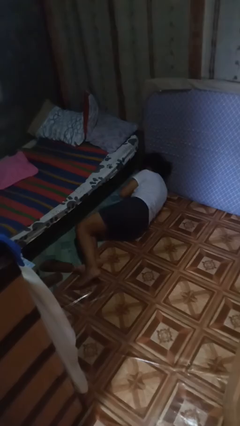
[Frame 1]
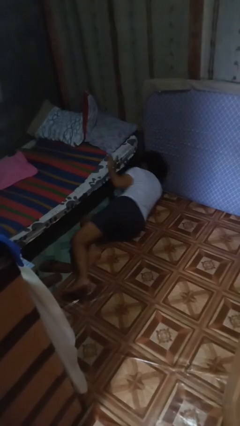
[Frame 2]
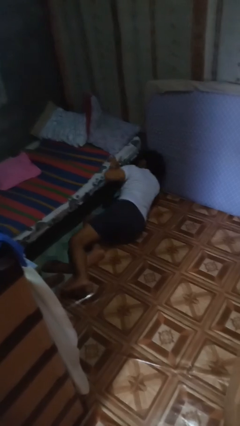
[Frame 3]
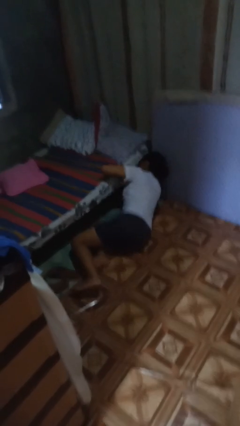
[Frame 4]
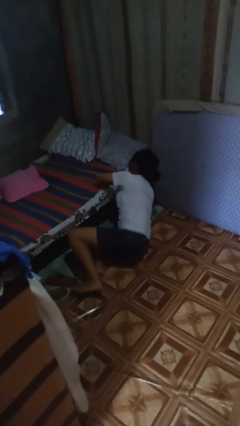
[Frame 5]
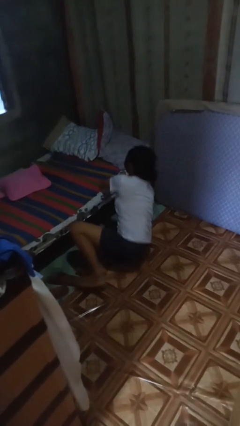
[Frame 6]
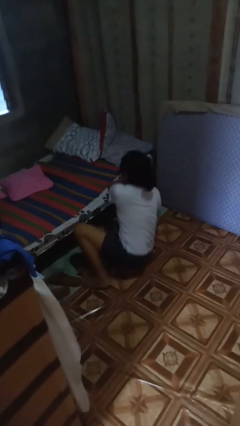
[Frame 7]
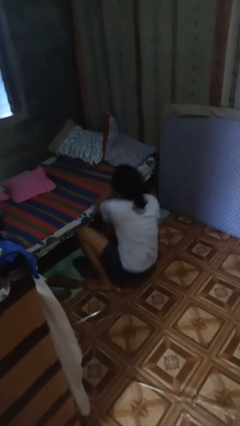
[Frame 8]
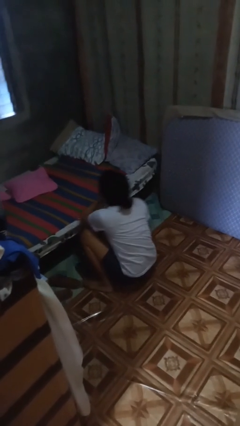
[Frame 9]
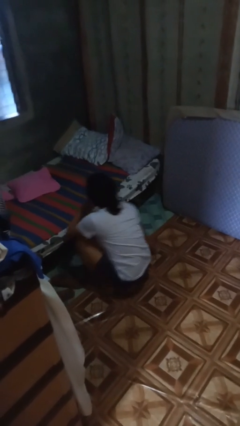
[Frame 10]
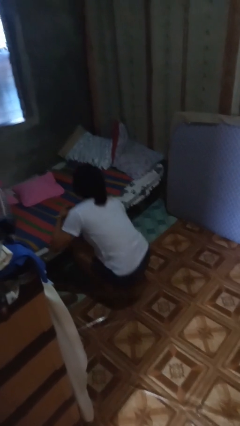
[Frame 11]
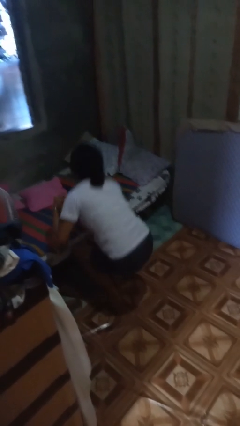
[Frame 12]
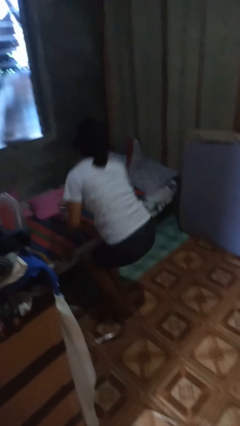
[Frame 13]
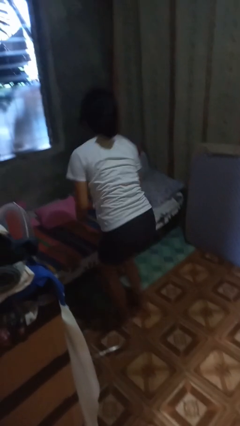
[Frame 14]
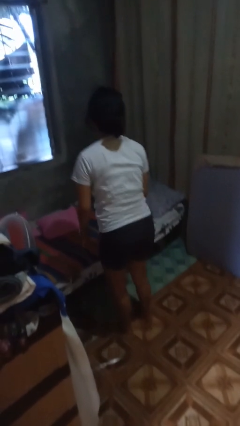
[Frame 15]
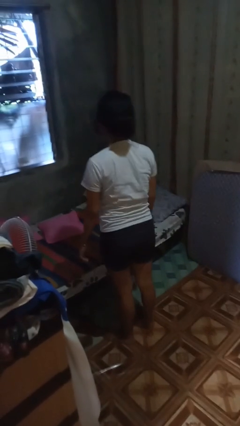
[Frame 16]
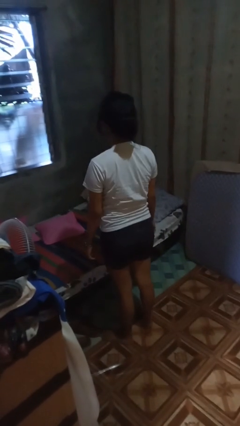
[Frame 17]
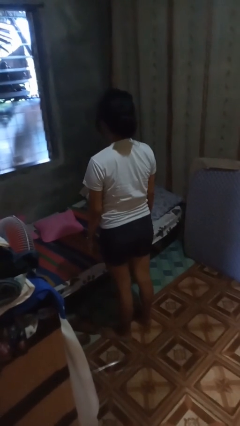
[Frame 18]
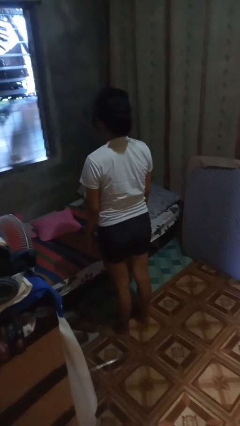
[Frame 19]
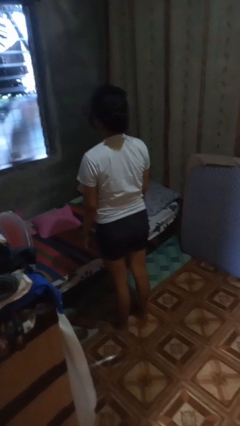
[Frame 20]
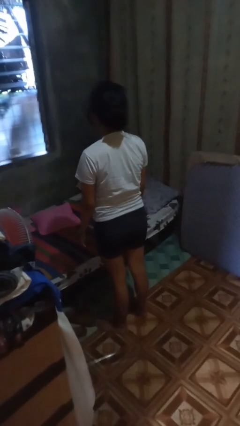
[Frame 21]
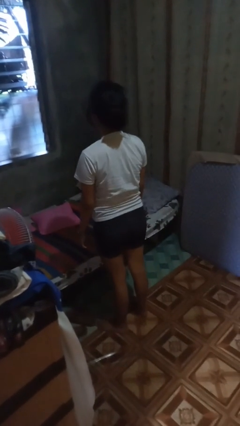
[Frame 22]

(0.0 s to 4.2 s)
person stands up from floor

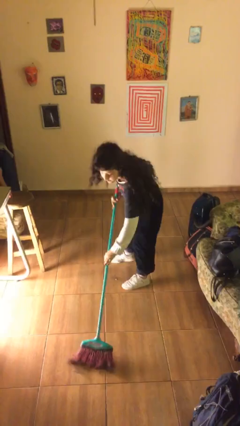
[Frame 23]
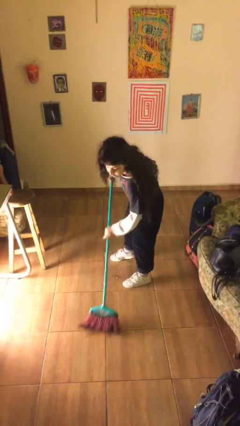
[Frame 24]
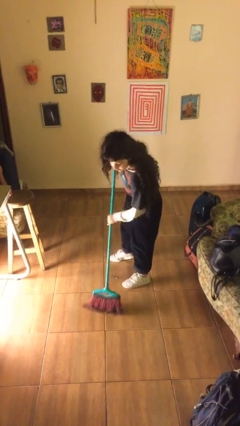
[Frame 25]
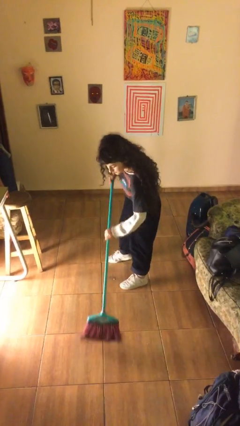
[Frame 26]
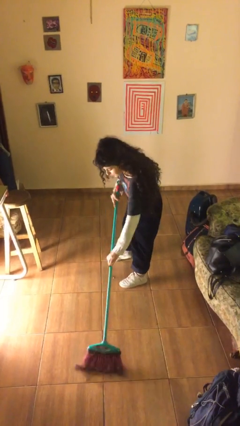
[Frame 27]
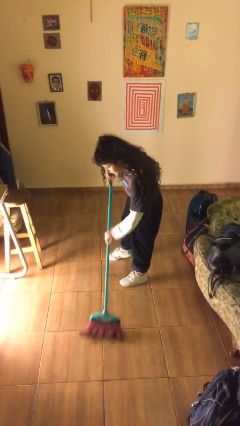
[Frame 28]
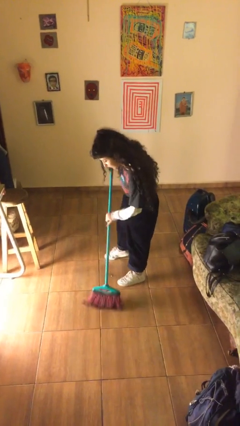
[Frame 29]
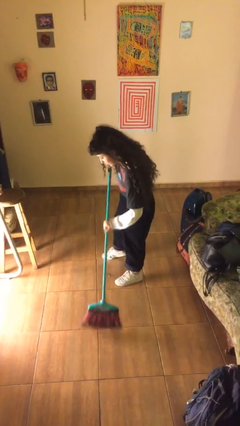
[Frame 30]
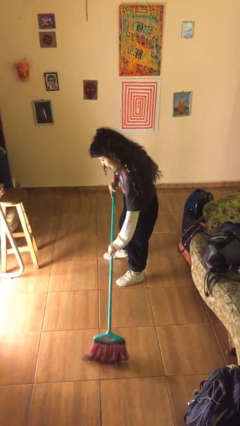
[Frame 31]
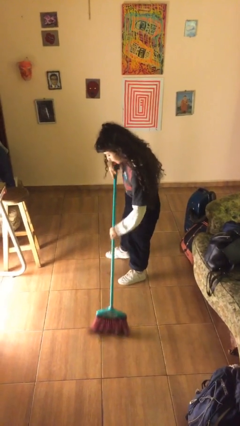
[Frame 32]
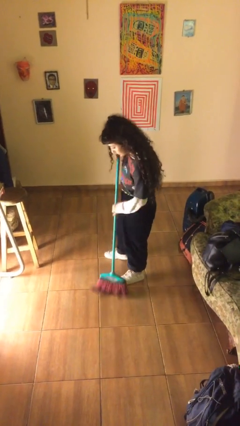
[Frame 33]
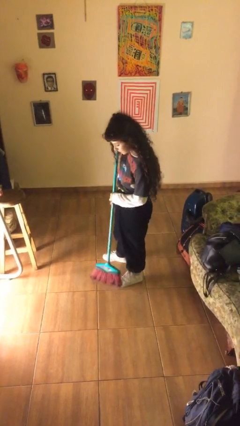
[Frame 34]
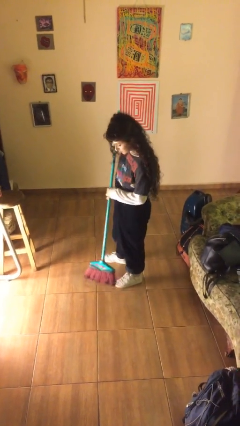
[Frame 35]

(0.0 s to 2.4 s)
person sweeps floor

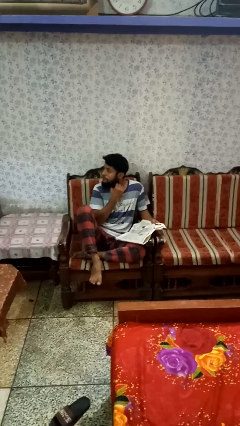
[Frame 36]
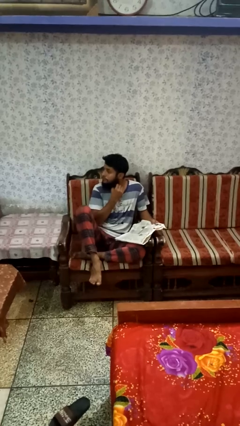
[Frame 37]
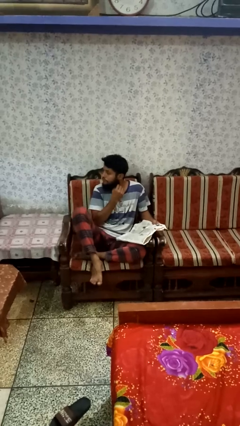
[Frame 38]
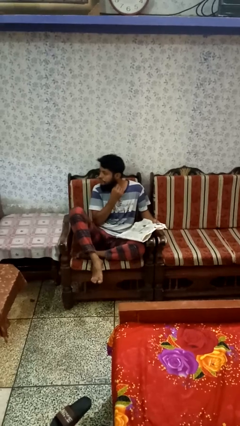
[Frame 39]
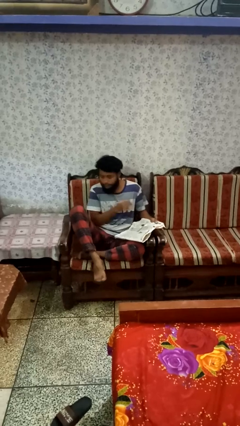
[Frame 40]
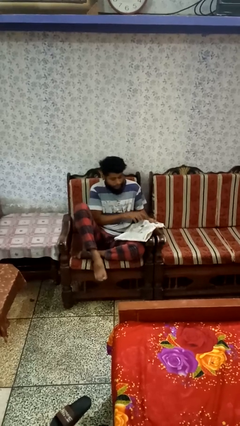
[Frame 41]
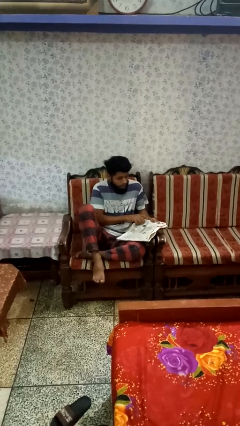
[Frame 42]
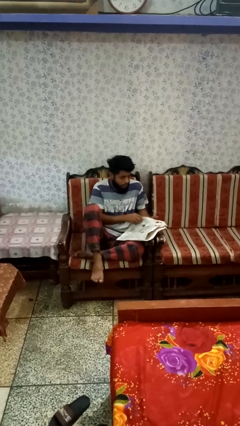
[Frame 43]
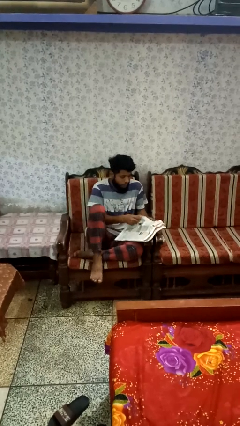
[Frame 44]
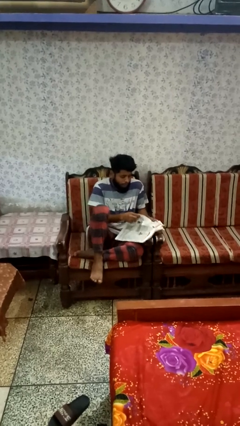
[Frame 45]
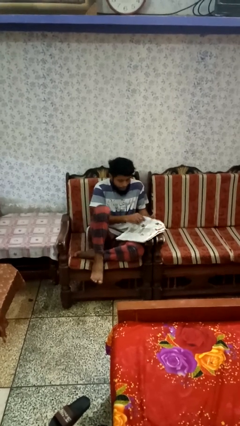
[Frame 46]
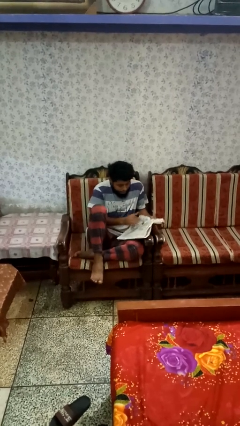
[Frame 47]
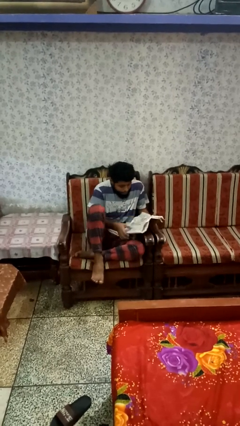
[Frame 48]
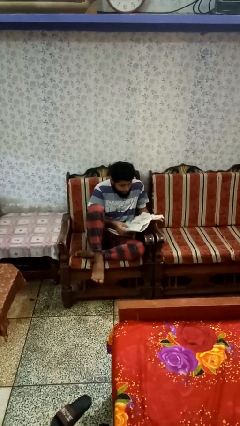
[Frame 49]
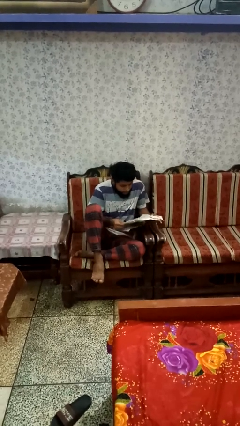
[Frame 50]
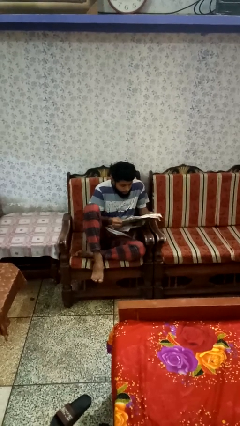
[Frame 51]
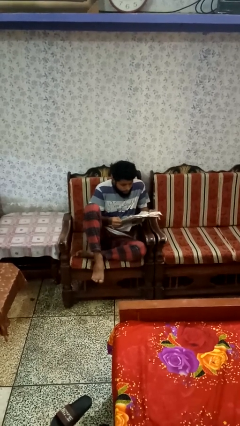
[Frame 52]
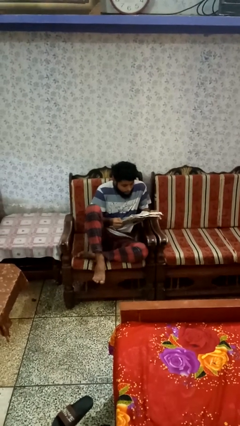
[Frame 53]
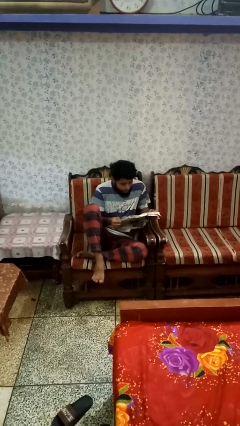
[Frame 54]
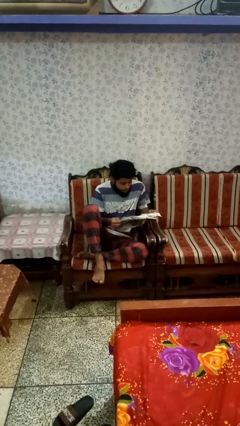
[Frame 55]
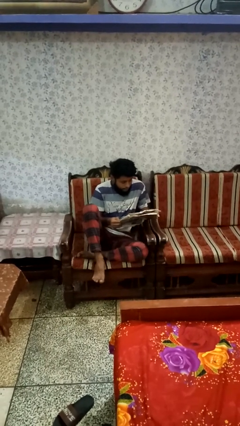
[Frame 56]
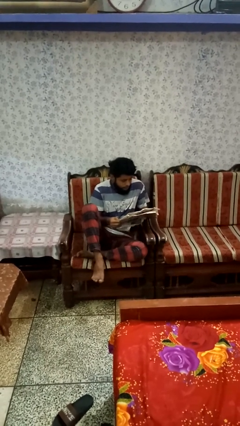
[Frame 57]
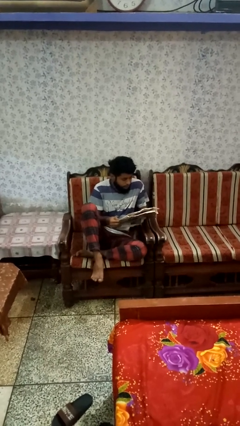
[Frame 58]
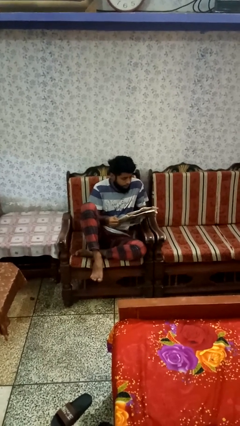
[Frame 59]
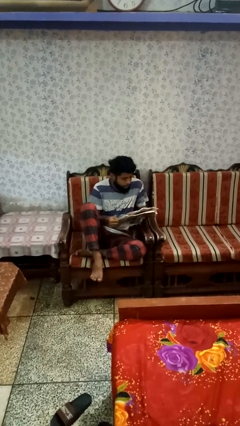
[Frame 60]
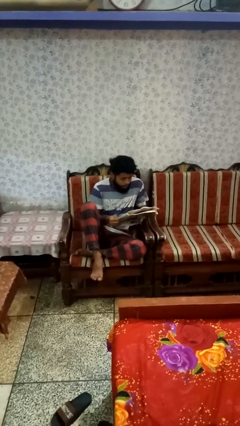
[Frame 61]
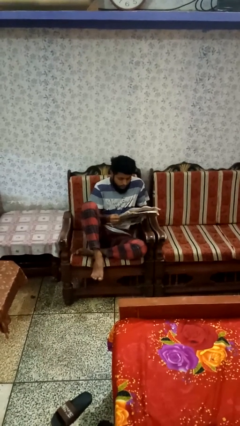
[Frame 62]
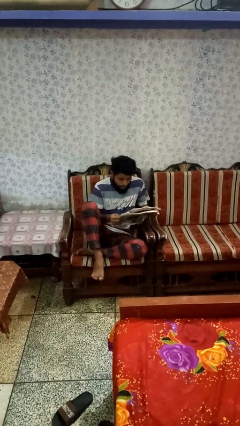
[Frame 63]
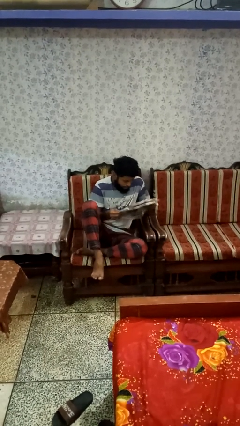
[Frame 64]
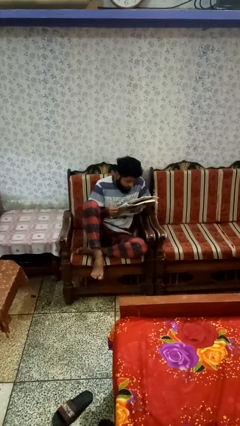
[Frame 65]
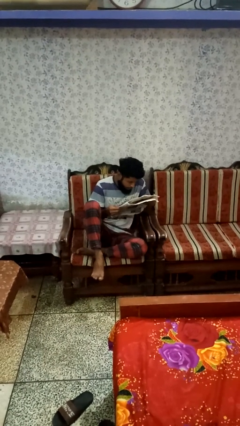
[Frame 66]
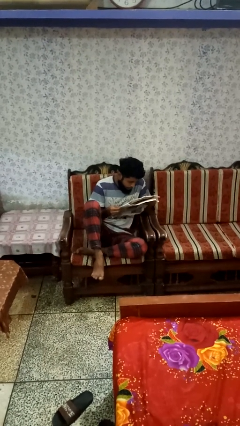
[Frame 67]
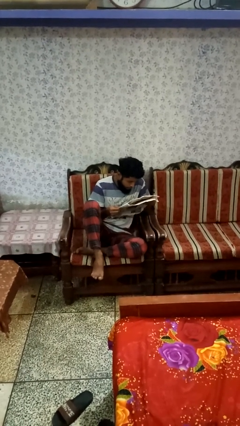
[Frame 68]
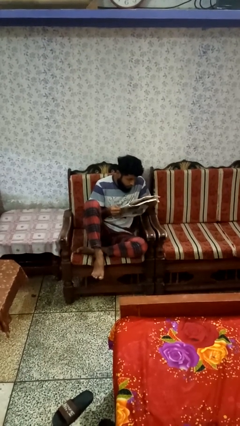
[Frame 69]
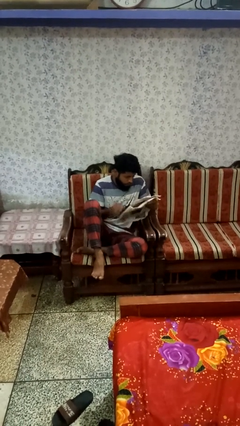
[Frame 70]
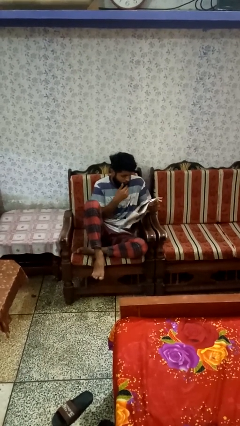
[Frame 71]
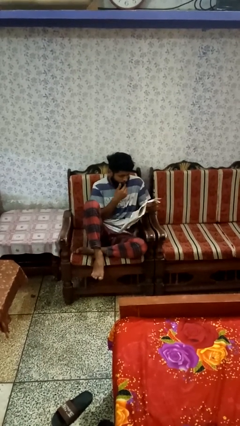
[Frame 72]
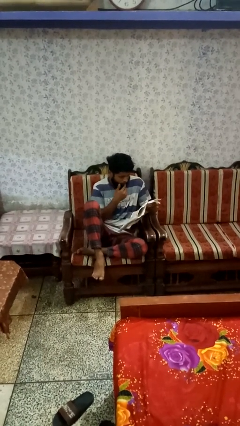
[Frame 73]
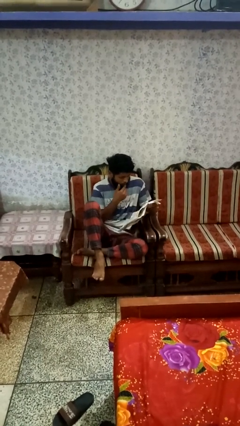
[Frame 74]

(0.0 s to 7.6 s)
person reads newspaper

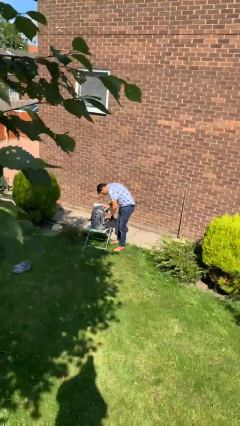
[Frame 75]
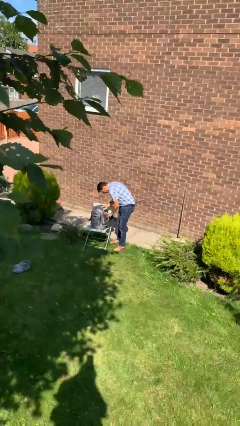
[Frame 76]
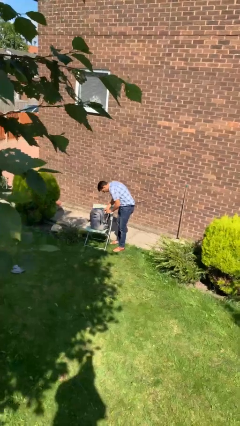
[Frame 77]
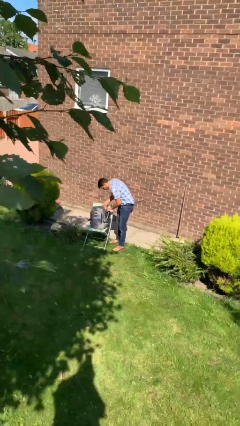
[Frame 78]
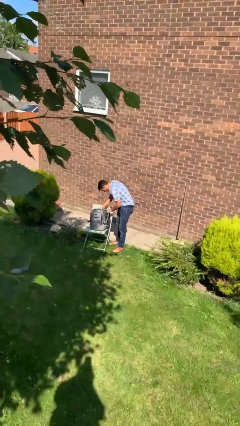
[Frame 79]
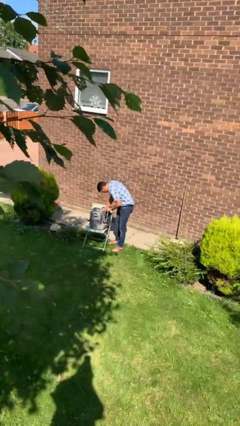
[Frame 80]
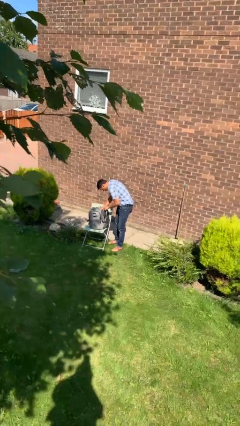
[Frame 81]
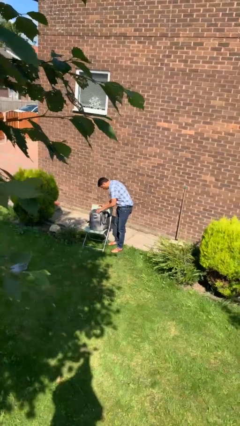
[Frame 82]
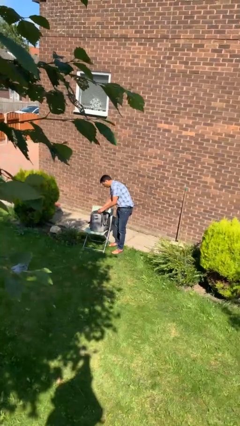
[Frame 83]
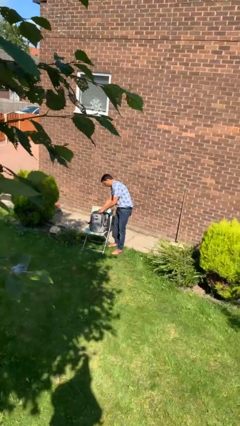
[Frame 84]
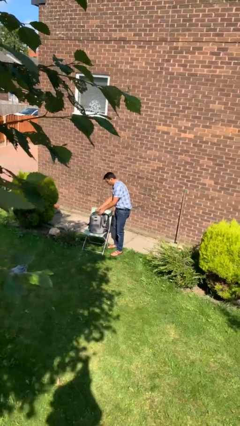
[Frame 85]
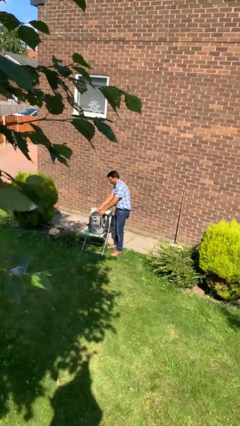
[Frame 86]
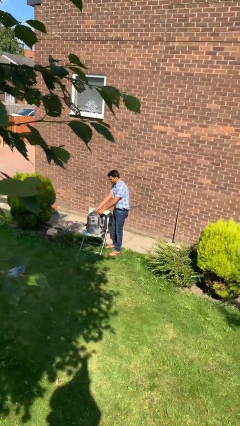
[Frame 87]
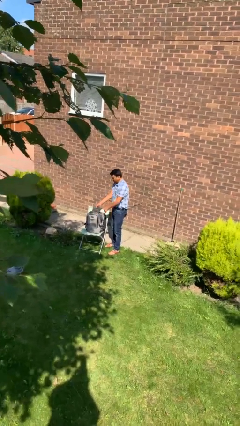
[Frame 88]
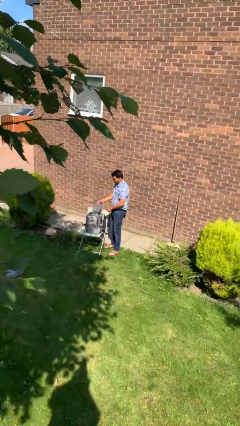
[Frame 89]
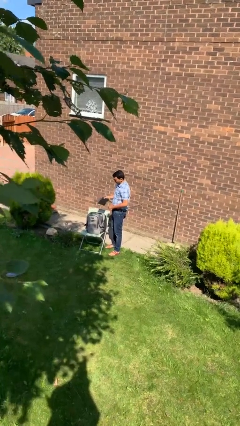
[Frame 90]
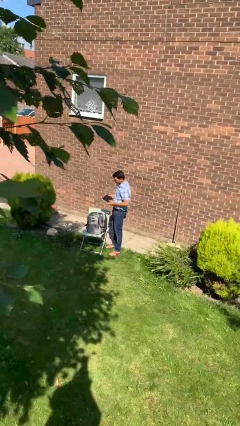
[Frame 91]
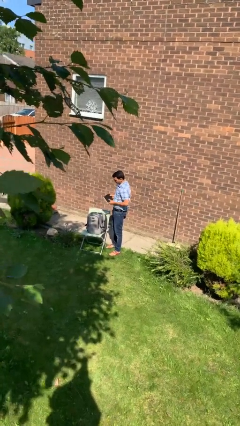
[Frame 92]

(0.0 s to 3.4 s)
person searches in backpack
